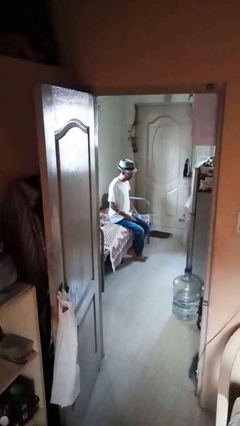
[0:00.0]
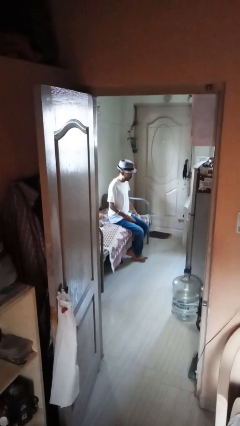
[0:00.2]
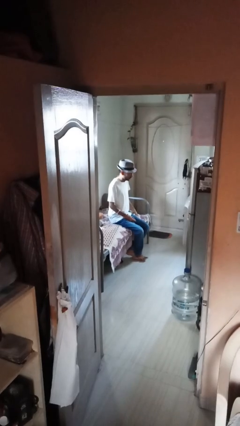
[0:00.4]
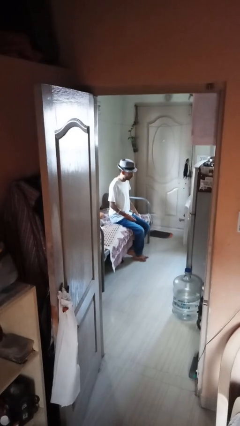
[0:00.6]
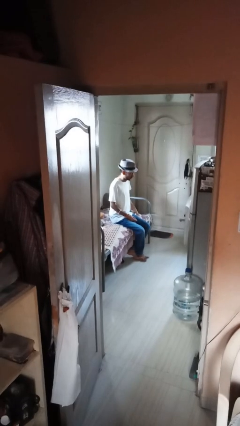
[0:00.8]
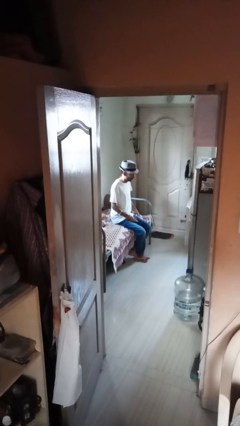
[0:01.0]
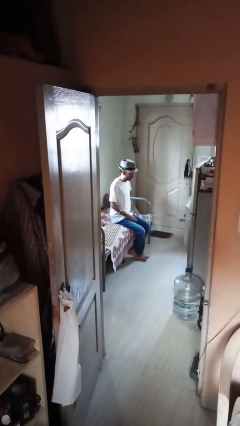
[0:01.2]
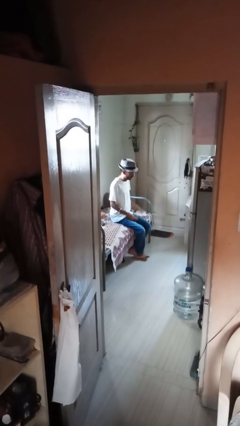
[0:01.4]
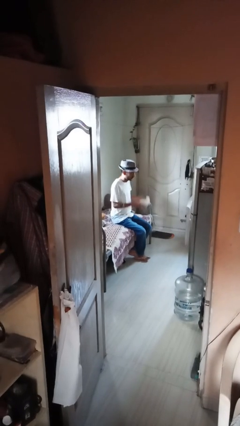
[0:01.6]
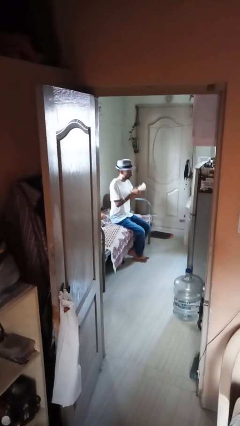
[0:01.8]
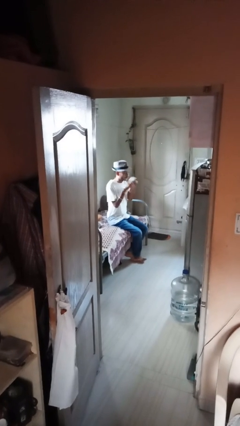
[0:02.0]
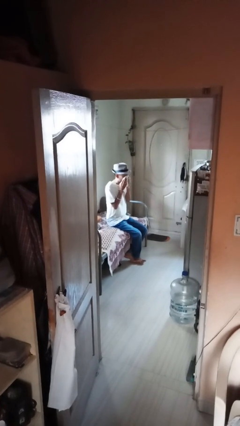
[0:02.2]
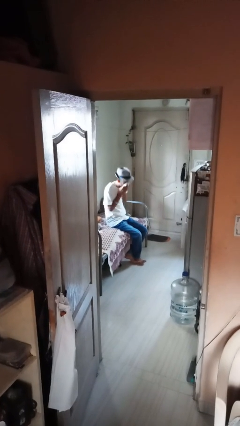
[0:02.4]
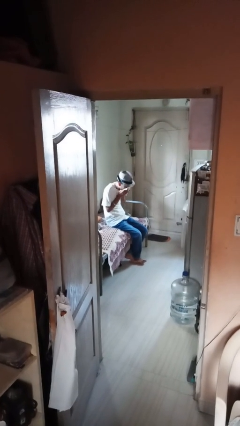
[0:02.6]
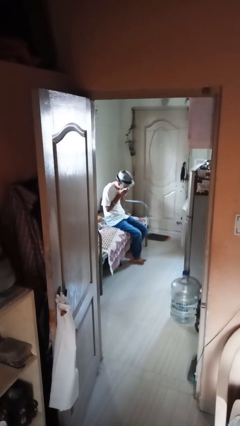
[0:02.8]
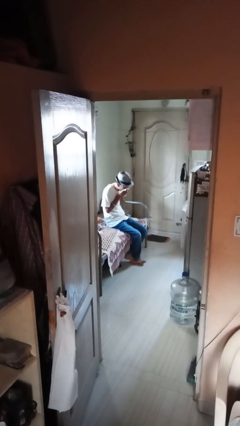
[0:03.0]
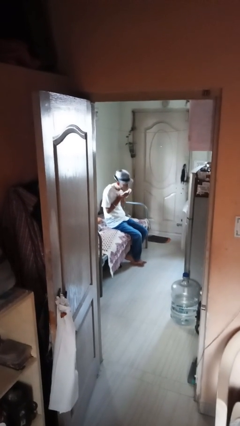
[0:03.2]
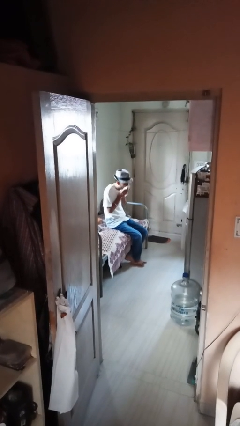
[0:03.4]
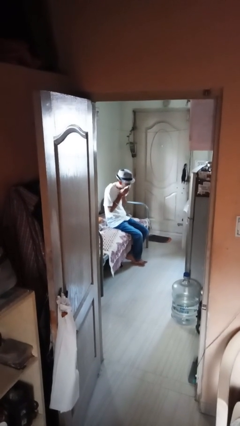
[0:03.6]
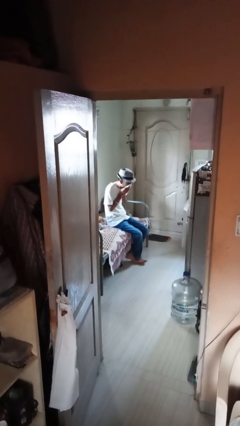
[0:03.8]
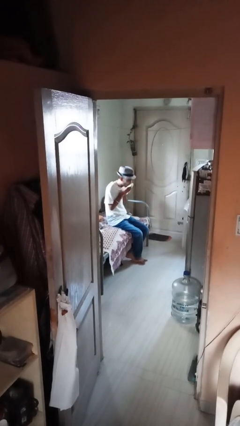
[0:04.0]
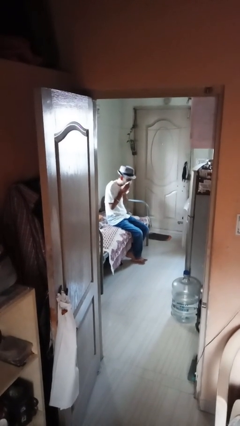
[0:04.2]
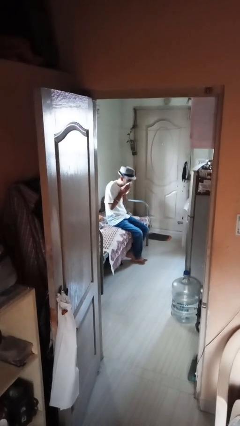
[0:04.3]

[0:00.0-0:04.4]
person blows nose

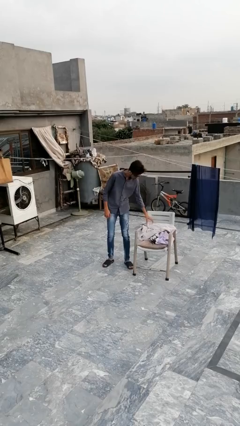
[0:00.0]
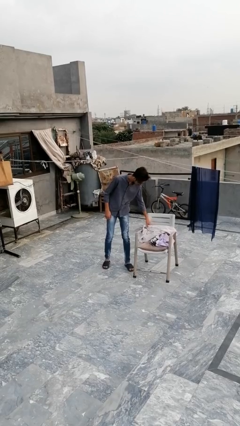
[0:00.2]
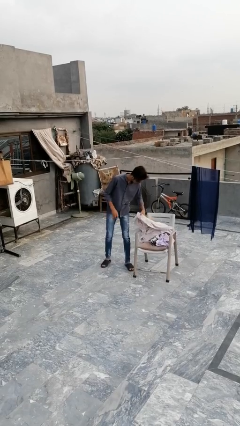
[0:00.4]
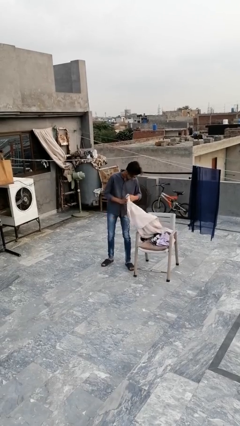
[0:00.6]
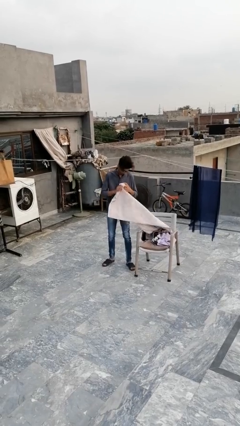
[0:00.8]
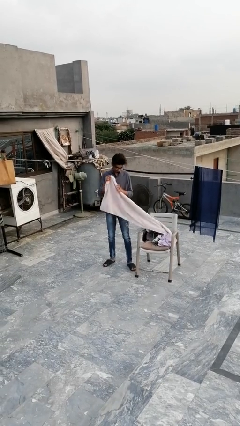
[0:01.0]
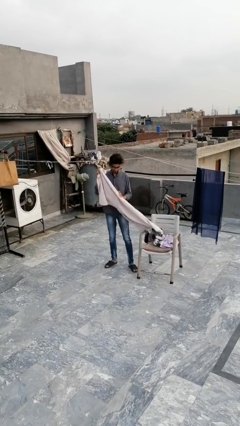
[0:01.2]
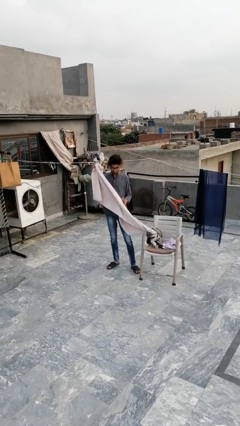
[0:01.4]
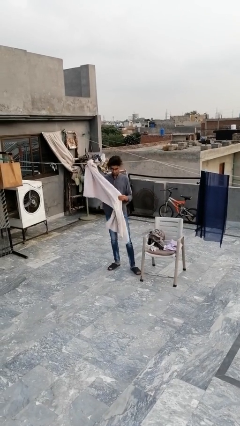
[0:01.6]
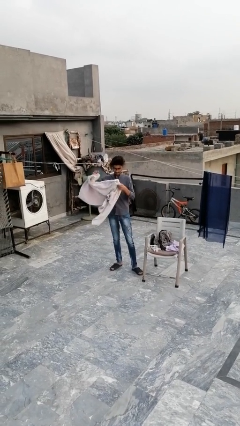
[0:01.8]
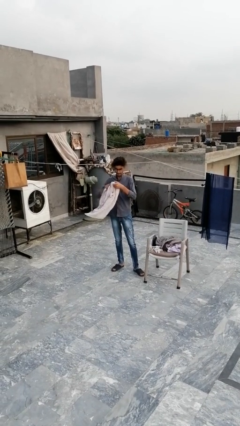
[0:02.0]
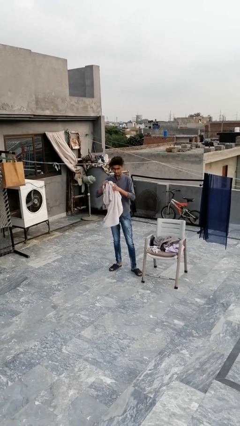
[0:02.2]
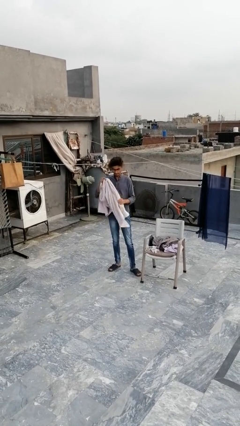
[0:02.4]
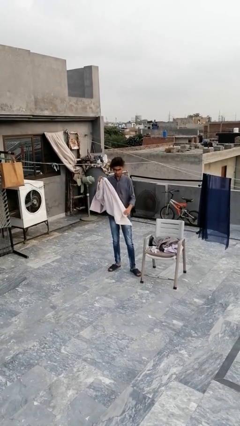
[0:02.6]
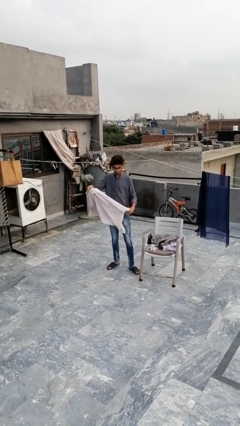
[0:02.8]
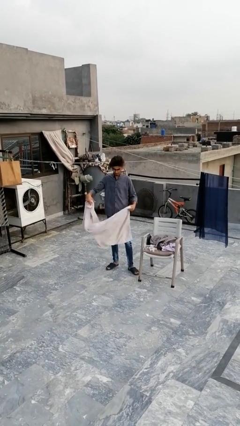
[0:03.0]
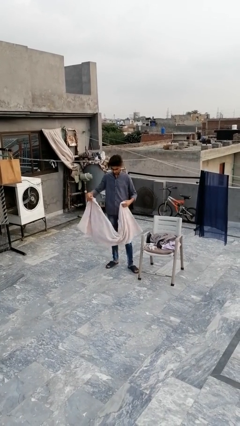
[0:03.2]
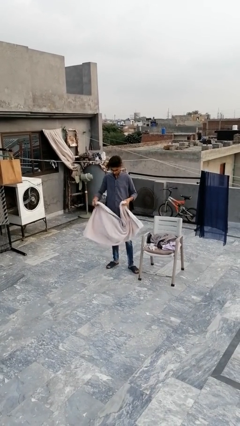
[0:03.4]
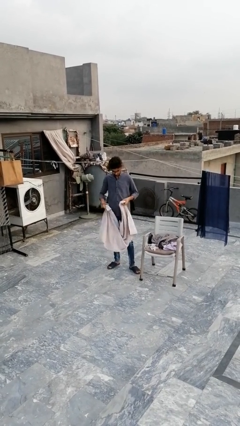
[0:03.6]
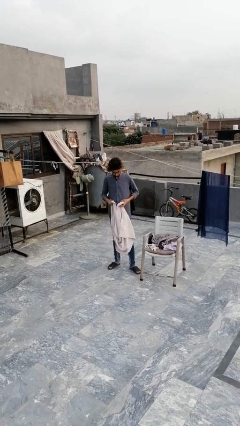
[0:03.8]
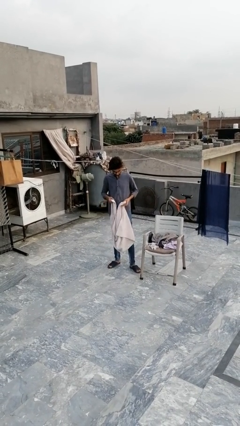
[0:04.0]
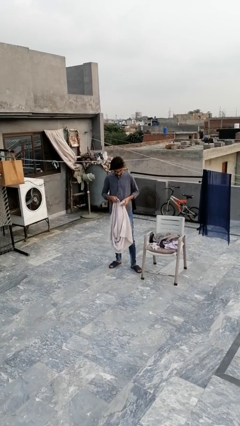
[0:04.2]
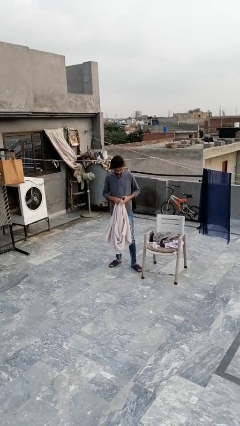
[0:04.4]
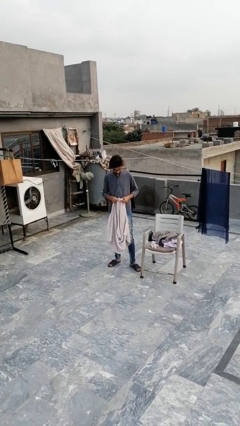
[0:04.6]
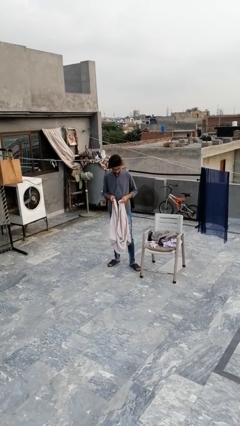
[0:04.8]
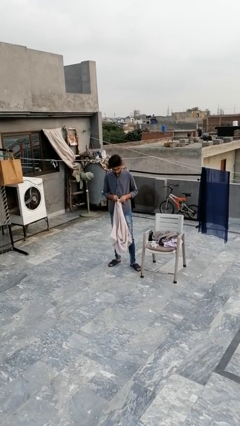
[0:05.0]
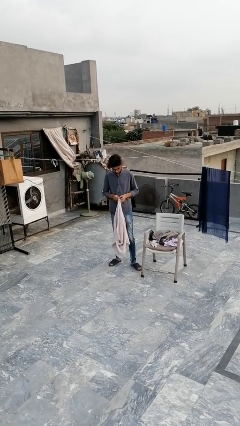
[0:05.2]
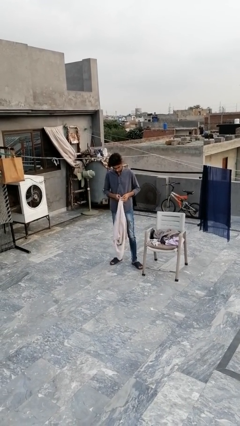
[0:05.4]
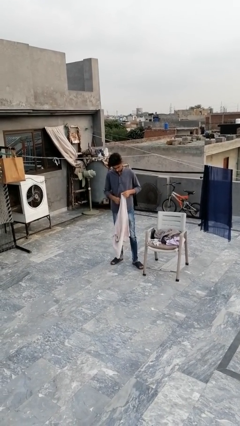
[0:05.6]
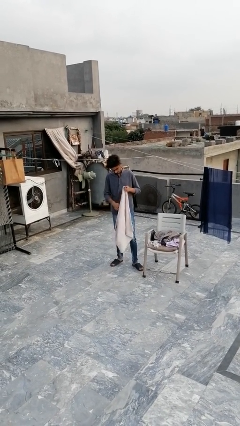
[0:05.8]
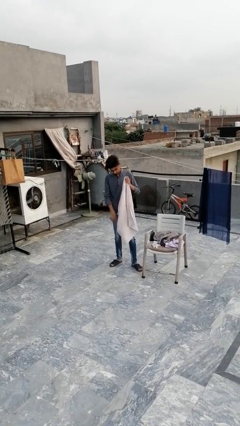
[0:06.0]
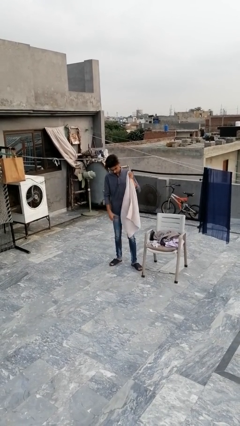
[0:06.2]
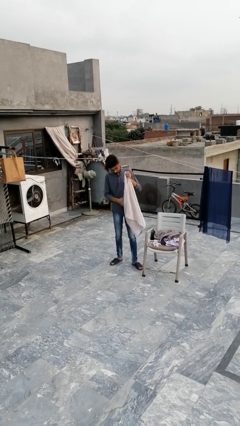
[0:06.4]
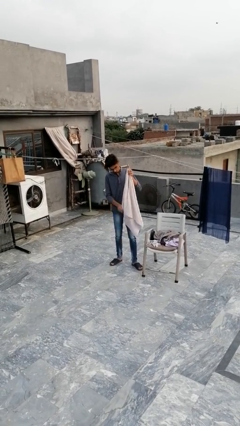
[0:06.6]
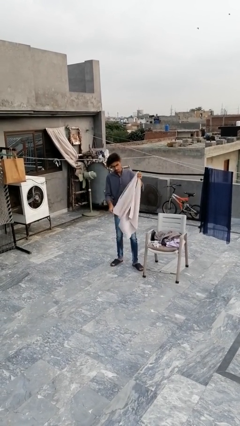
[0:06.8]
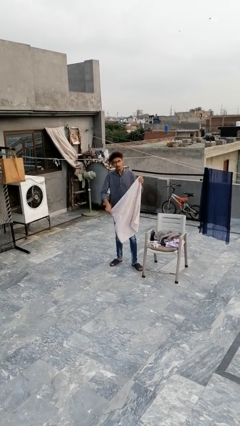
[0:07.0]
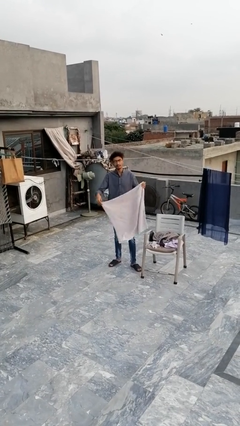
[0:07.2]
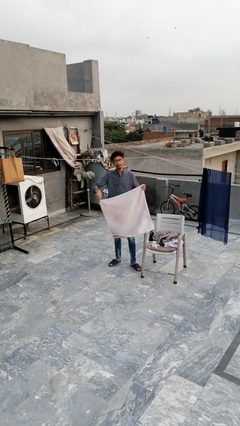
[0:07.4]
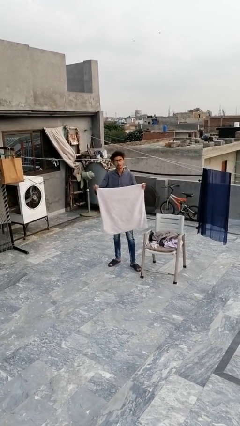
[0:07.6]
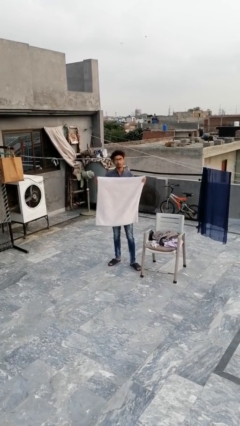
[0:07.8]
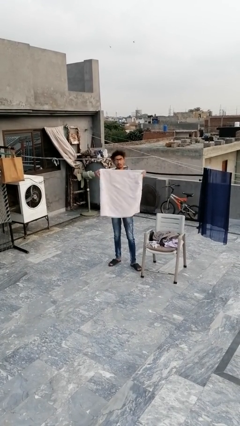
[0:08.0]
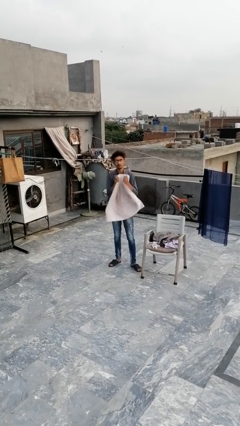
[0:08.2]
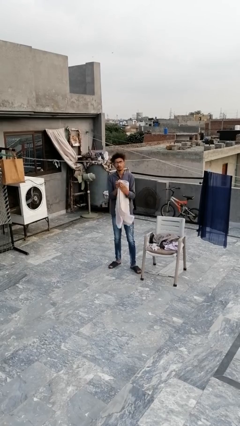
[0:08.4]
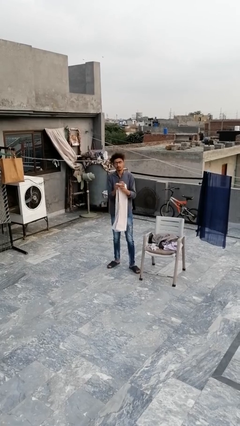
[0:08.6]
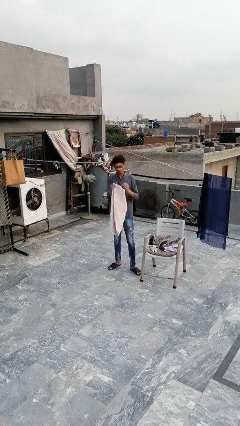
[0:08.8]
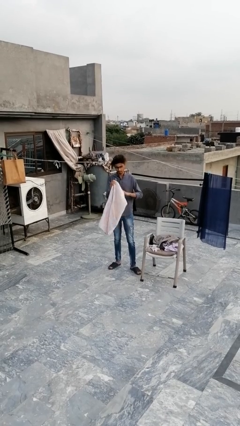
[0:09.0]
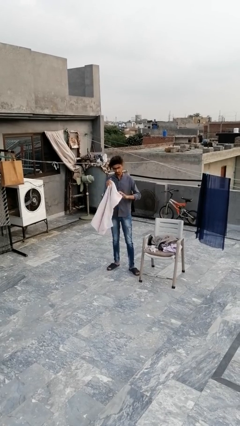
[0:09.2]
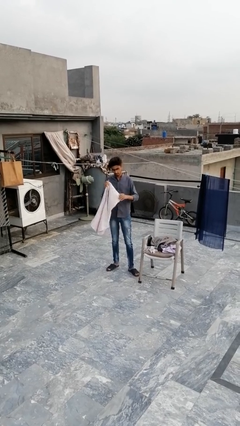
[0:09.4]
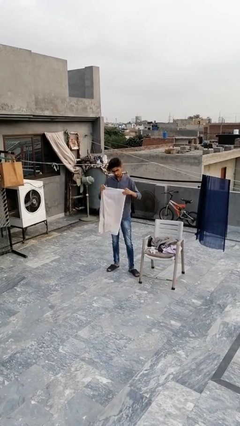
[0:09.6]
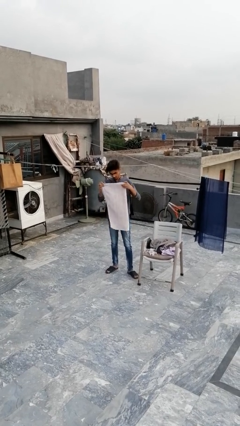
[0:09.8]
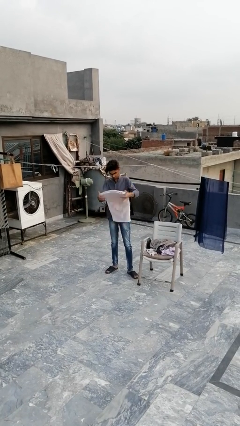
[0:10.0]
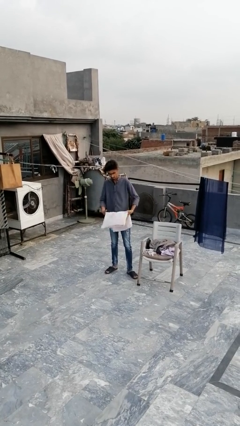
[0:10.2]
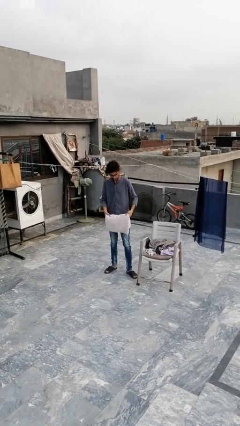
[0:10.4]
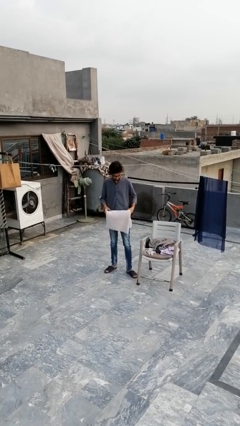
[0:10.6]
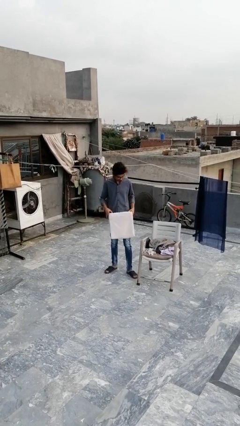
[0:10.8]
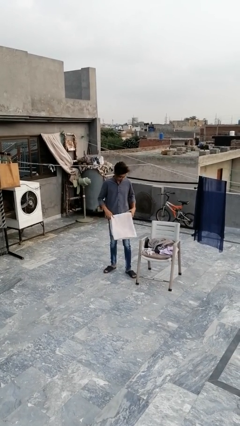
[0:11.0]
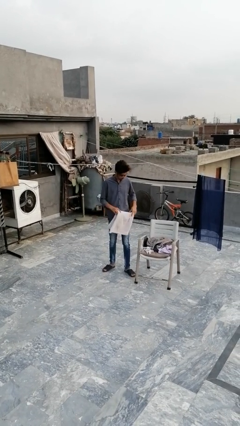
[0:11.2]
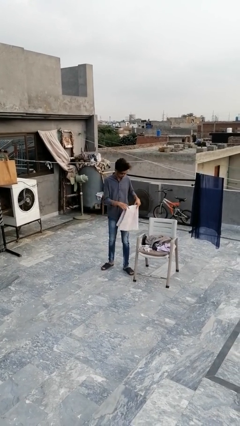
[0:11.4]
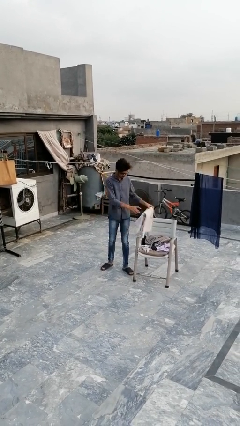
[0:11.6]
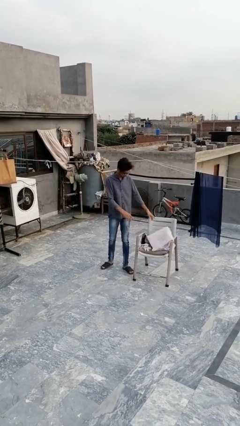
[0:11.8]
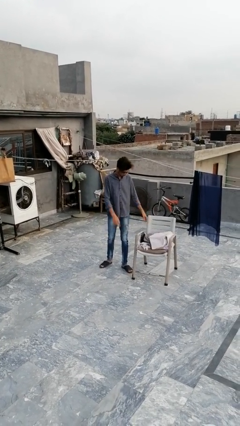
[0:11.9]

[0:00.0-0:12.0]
person folds towel

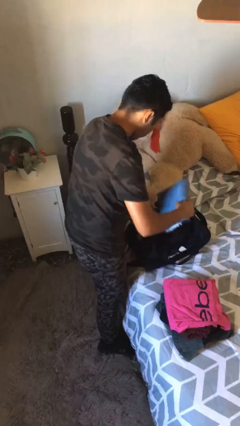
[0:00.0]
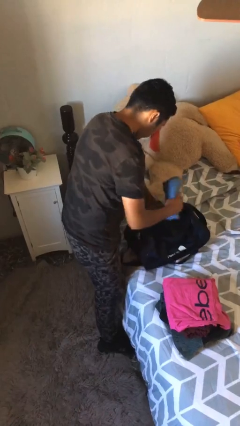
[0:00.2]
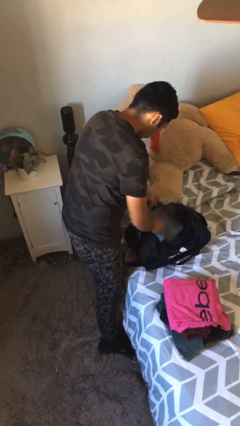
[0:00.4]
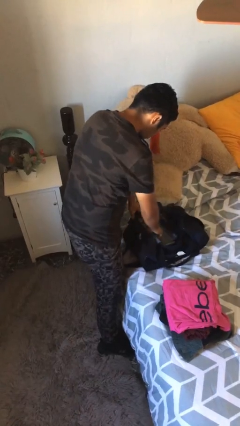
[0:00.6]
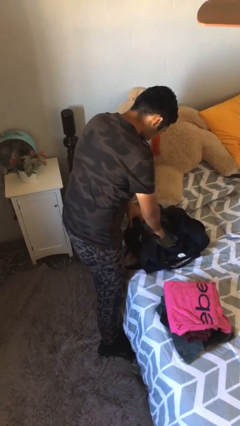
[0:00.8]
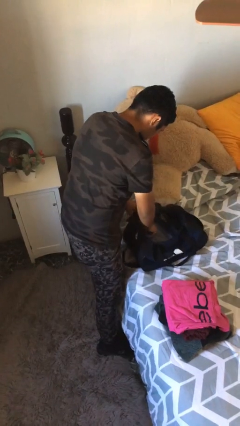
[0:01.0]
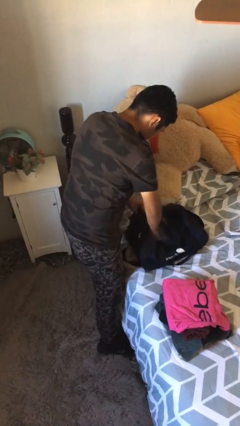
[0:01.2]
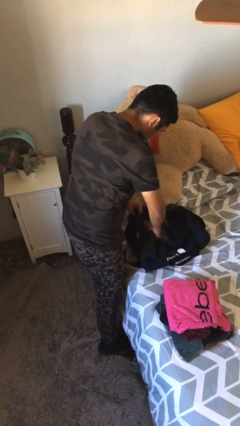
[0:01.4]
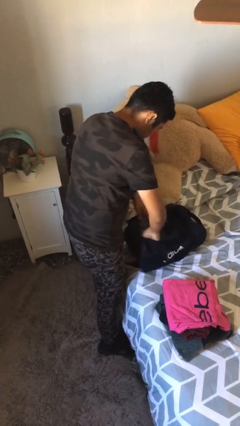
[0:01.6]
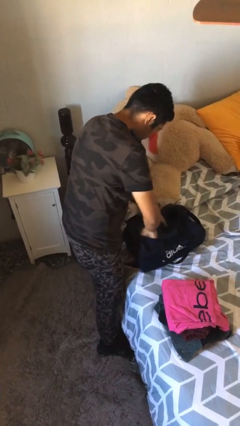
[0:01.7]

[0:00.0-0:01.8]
person loads clothes into suitcase
